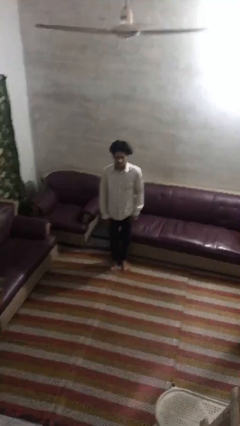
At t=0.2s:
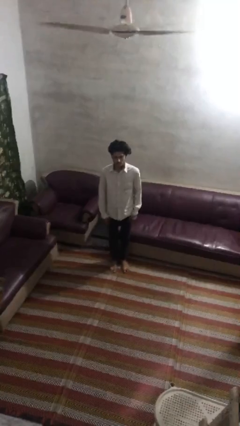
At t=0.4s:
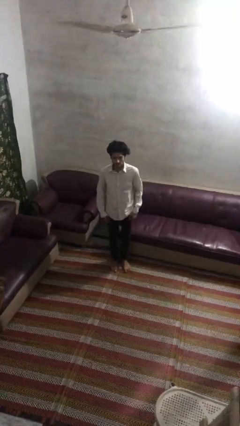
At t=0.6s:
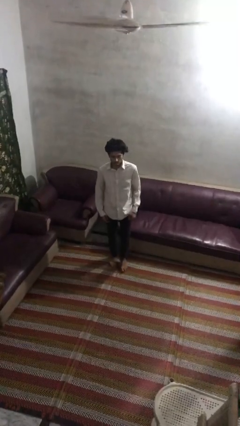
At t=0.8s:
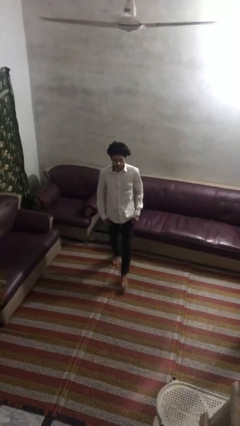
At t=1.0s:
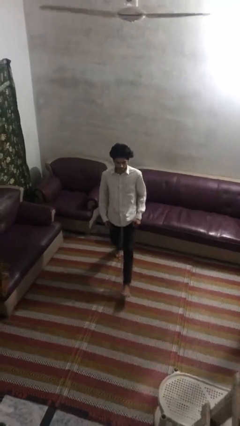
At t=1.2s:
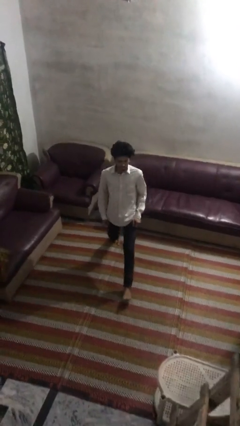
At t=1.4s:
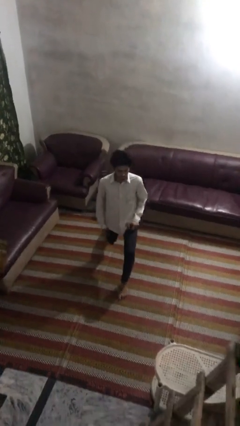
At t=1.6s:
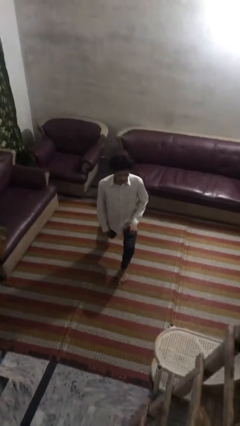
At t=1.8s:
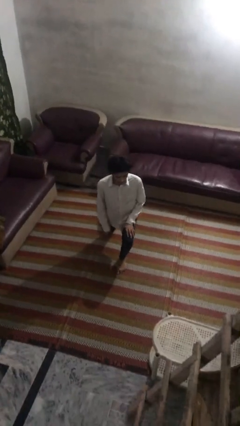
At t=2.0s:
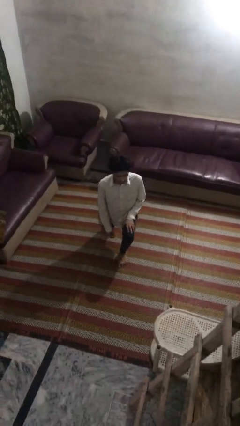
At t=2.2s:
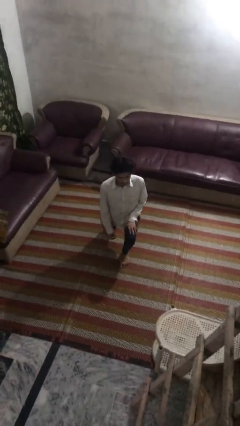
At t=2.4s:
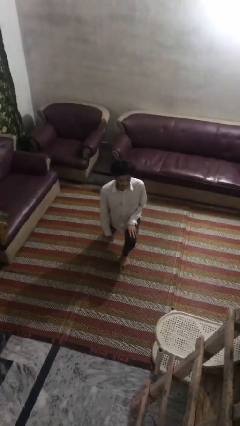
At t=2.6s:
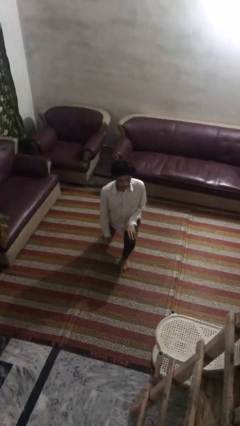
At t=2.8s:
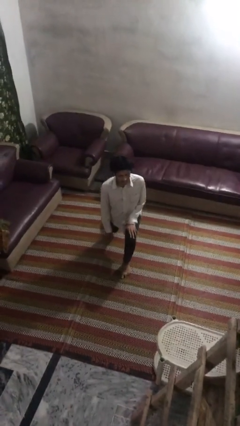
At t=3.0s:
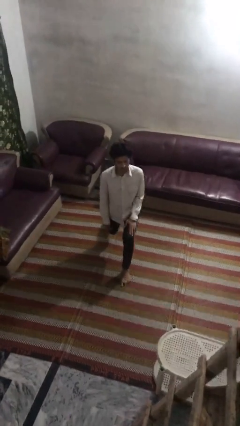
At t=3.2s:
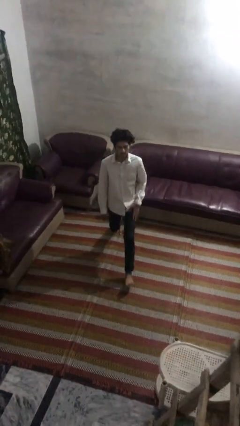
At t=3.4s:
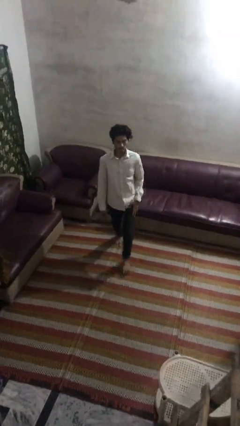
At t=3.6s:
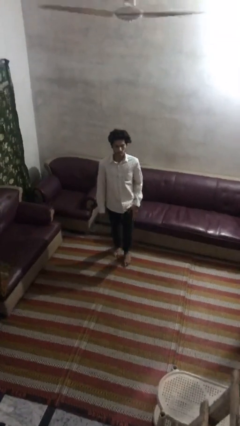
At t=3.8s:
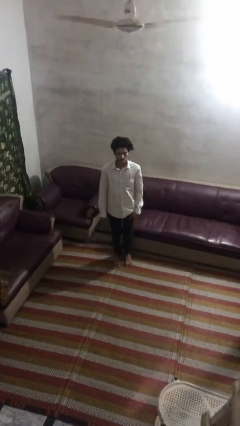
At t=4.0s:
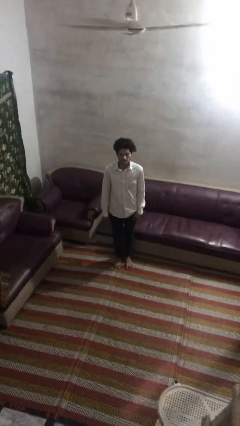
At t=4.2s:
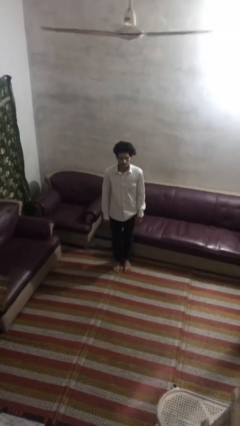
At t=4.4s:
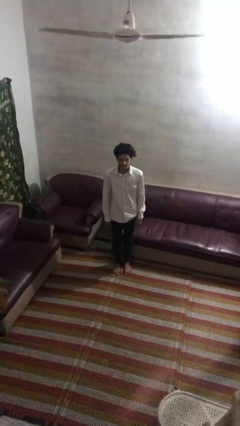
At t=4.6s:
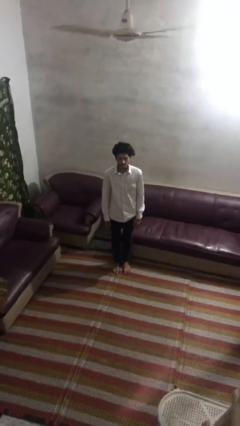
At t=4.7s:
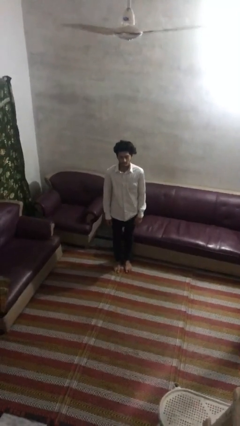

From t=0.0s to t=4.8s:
person exercises with lunges

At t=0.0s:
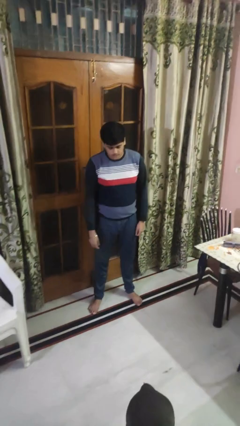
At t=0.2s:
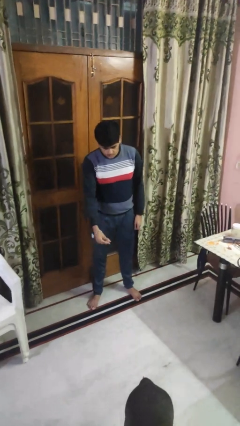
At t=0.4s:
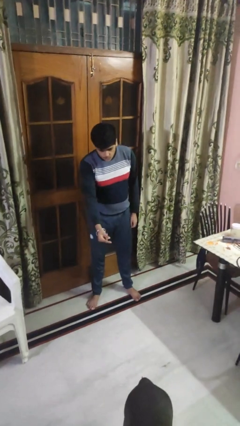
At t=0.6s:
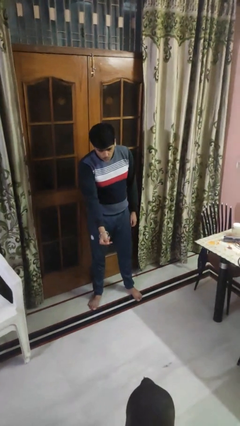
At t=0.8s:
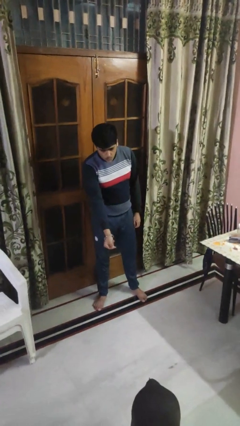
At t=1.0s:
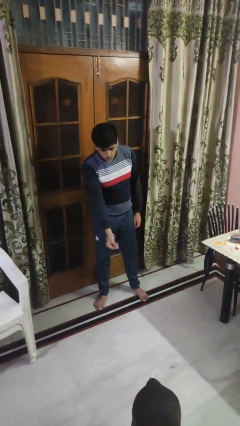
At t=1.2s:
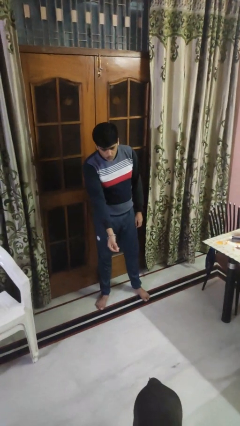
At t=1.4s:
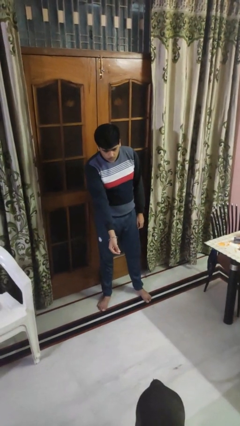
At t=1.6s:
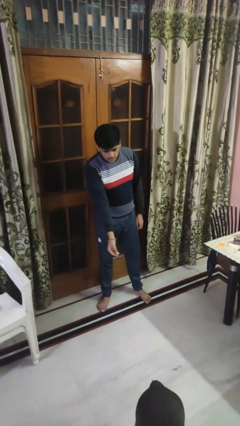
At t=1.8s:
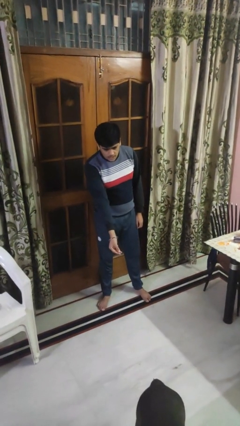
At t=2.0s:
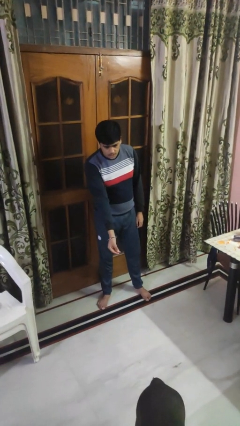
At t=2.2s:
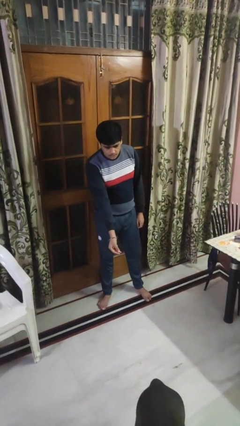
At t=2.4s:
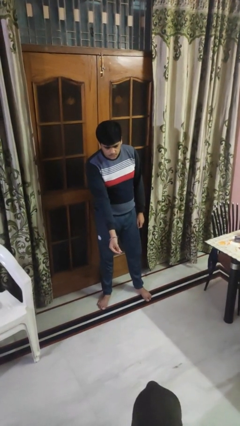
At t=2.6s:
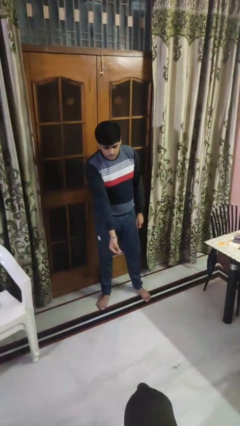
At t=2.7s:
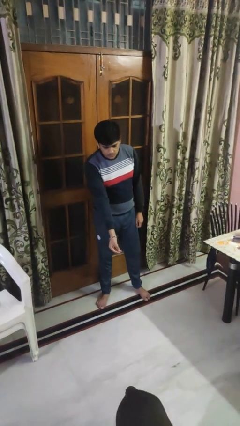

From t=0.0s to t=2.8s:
person points to dog

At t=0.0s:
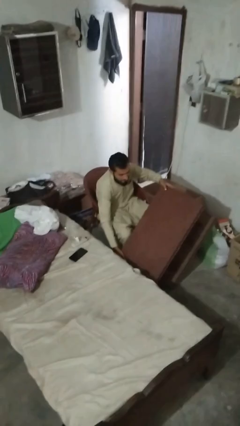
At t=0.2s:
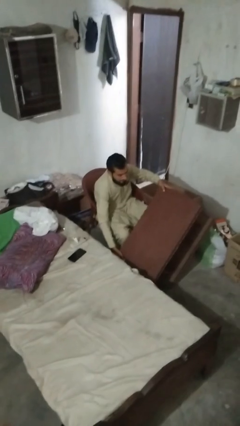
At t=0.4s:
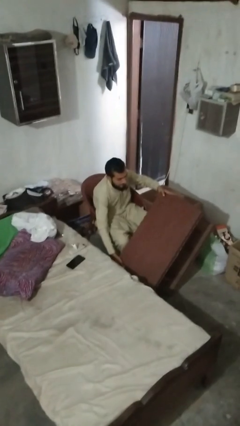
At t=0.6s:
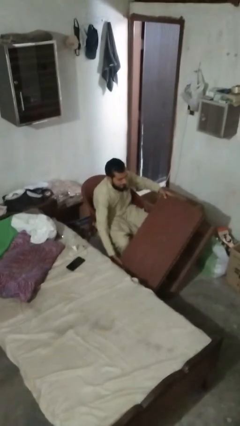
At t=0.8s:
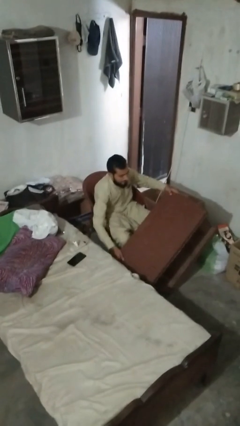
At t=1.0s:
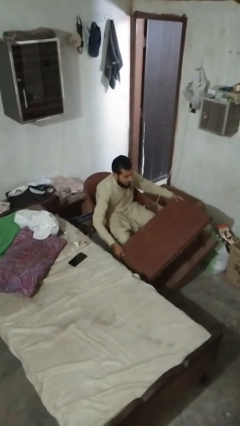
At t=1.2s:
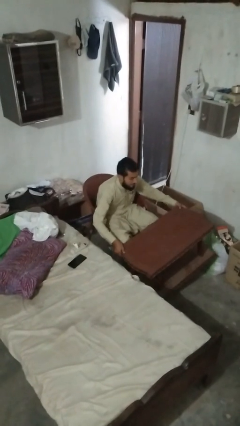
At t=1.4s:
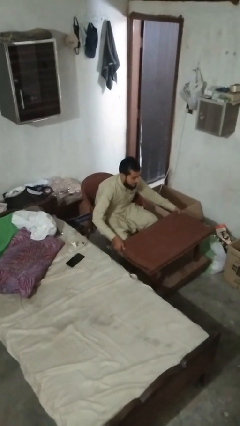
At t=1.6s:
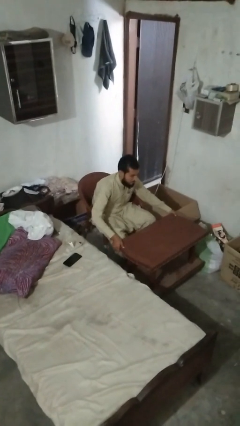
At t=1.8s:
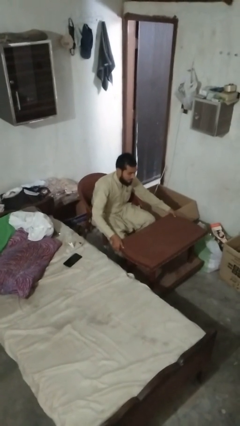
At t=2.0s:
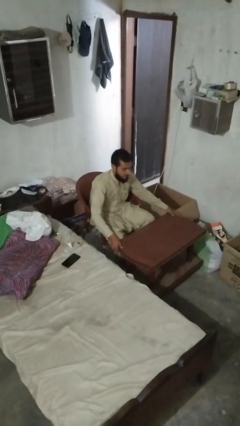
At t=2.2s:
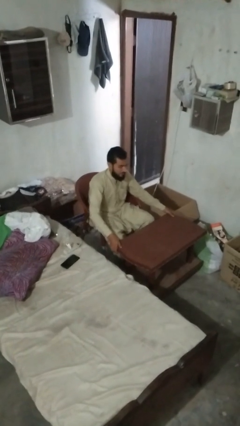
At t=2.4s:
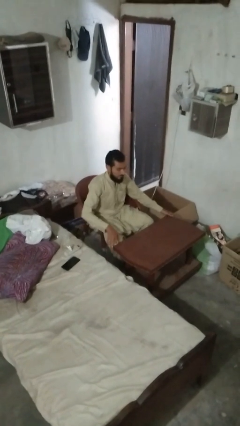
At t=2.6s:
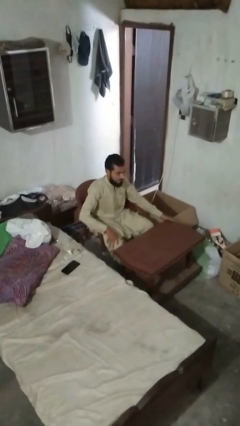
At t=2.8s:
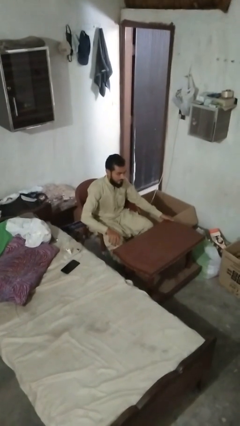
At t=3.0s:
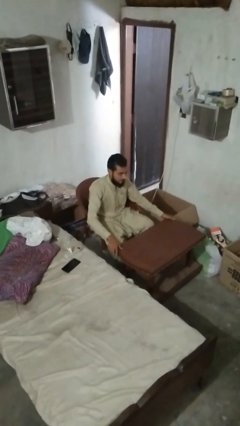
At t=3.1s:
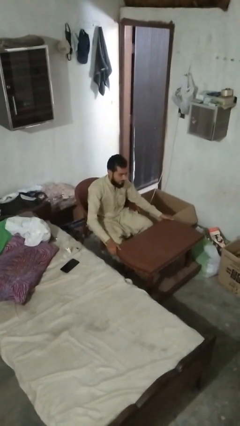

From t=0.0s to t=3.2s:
person sets upright furniture

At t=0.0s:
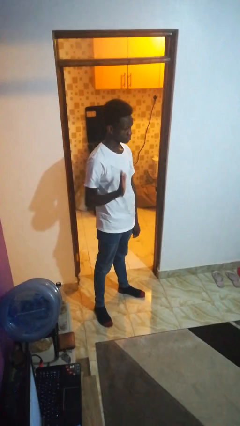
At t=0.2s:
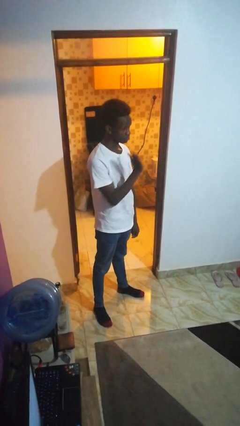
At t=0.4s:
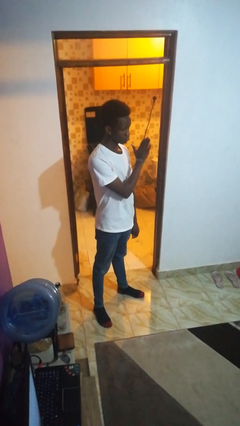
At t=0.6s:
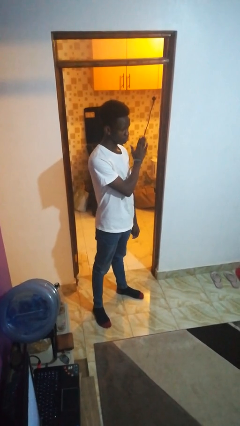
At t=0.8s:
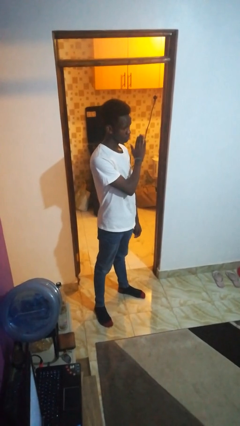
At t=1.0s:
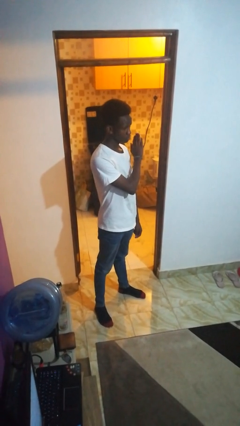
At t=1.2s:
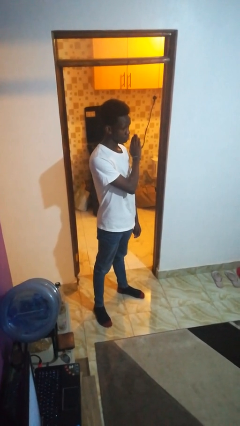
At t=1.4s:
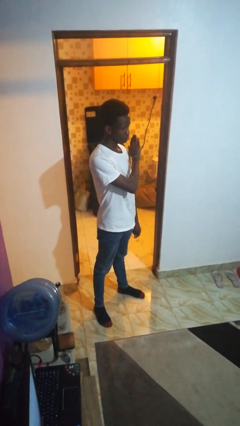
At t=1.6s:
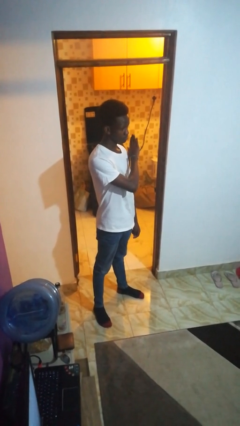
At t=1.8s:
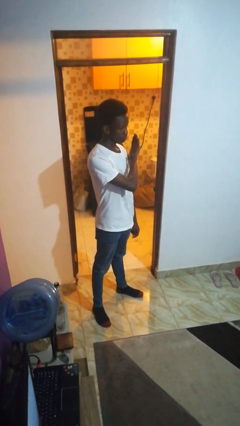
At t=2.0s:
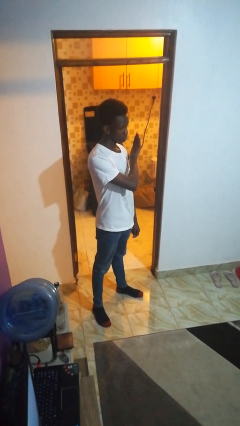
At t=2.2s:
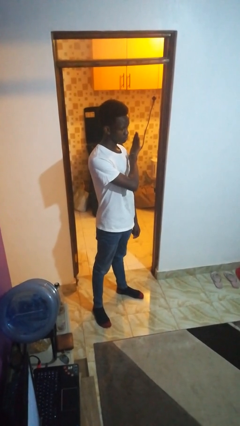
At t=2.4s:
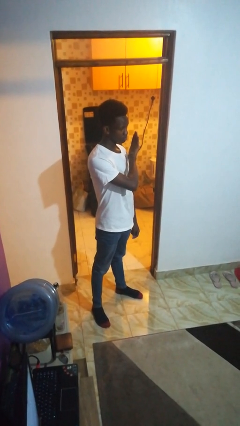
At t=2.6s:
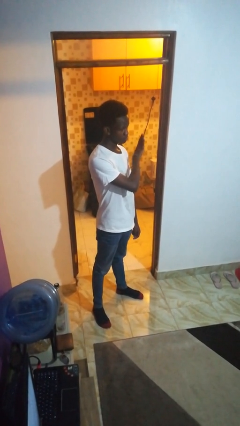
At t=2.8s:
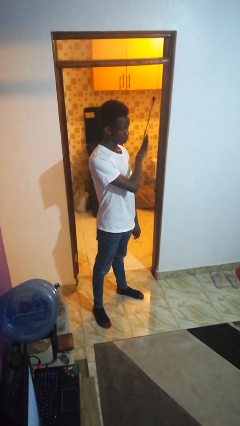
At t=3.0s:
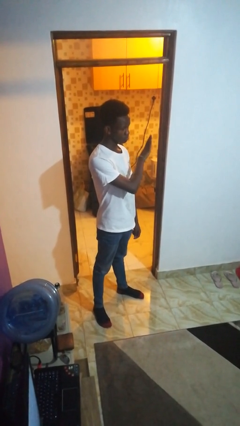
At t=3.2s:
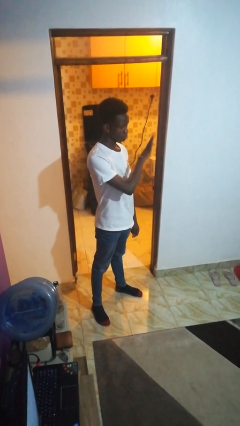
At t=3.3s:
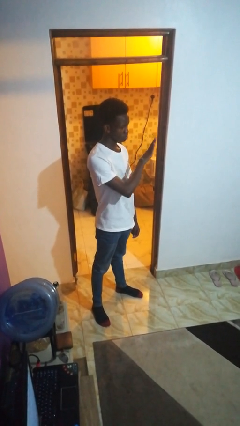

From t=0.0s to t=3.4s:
person gestures swipe left

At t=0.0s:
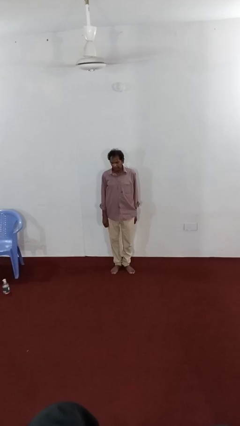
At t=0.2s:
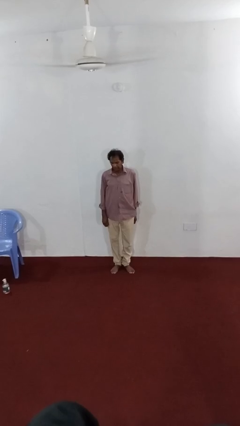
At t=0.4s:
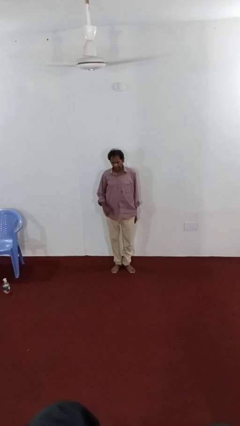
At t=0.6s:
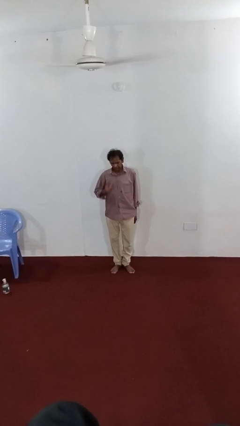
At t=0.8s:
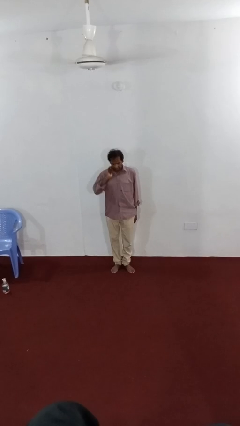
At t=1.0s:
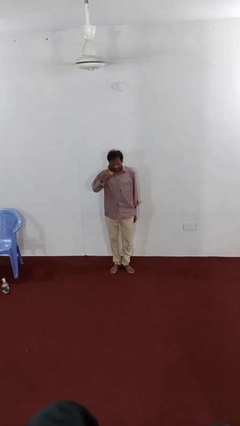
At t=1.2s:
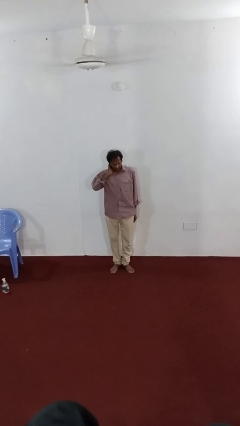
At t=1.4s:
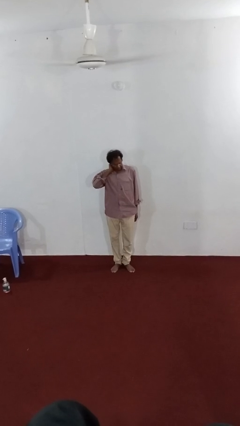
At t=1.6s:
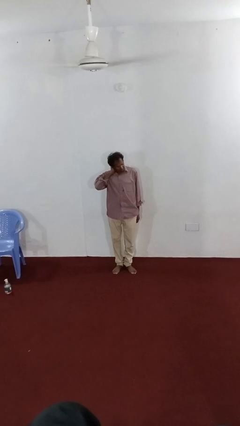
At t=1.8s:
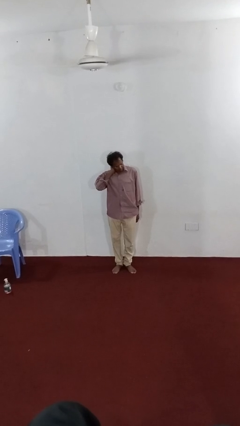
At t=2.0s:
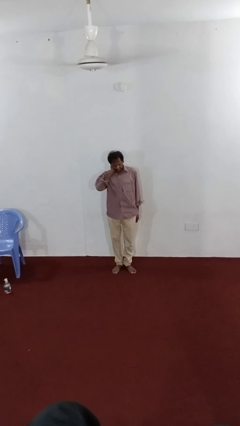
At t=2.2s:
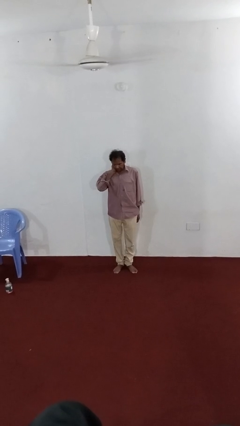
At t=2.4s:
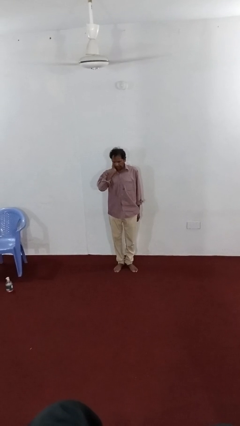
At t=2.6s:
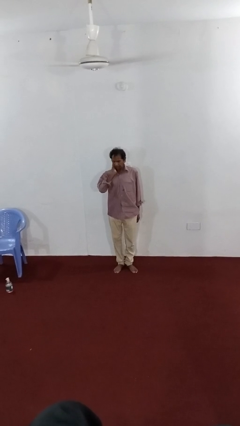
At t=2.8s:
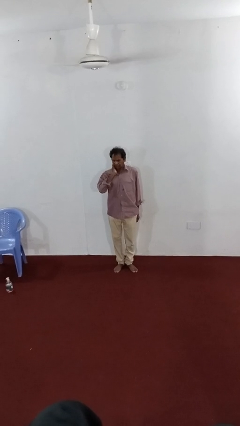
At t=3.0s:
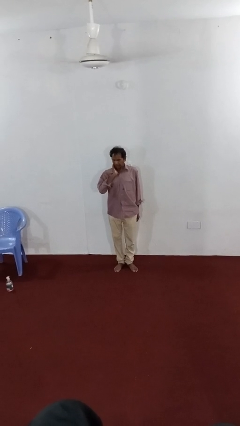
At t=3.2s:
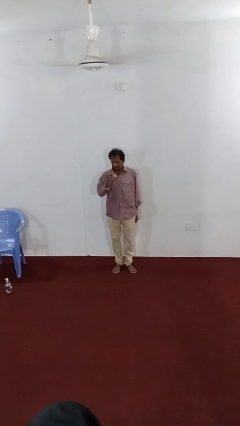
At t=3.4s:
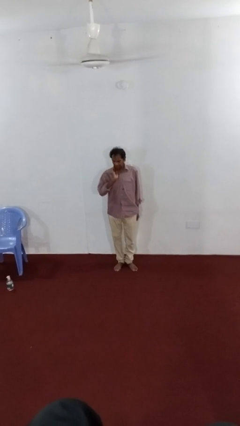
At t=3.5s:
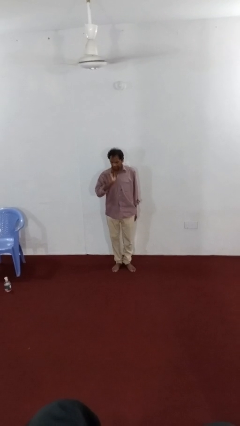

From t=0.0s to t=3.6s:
person rubs neck
